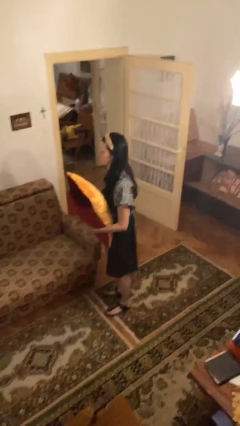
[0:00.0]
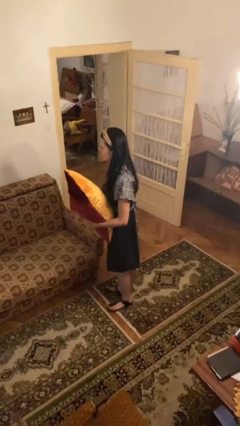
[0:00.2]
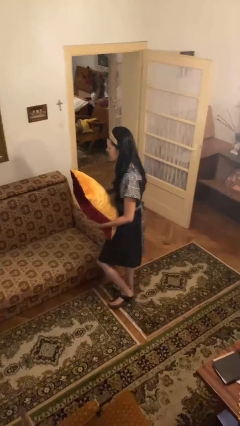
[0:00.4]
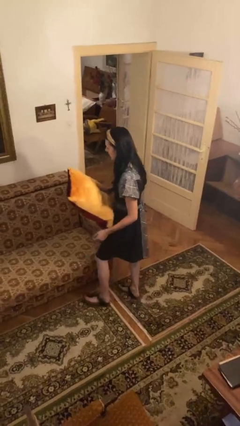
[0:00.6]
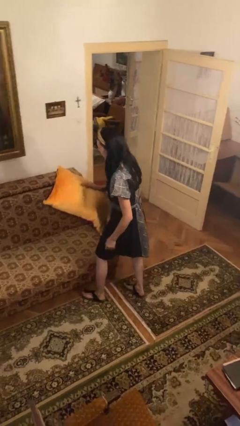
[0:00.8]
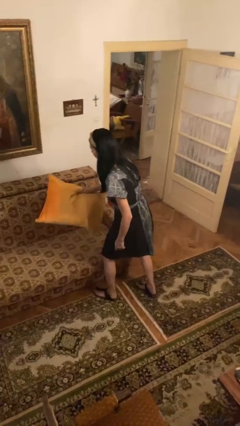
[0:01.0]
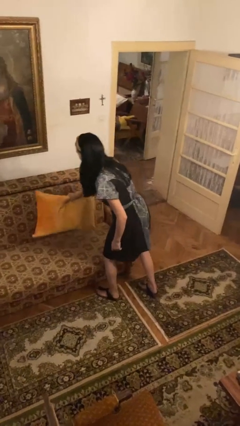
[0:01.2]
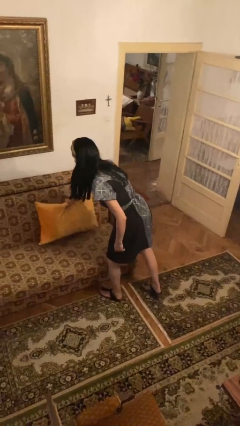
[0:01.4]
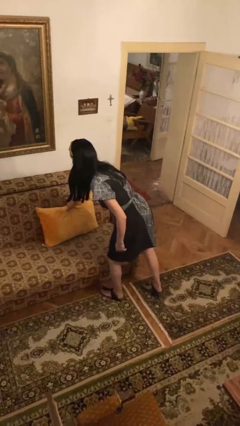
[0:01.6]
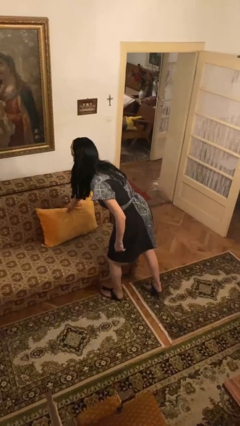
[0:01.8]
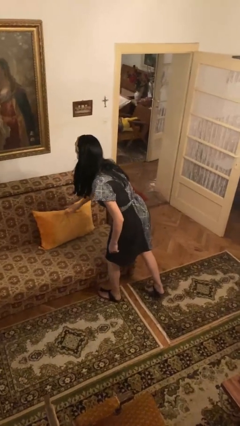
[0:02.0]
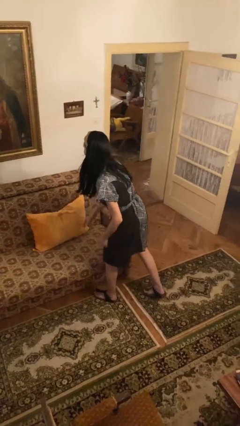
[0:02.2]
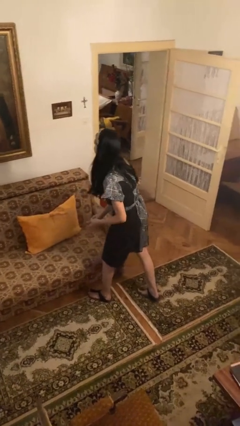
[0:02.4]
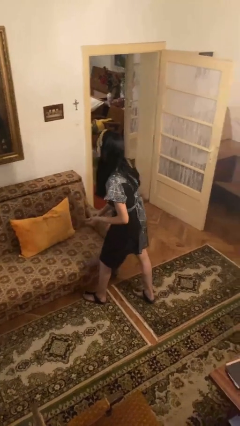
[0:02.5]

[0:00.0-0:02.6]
person puts down object on couch

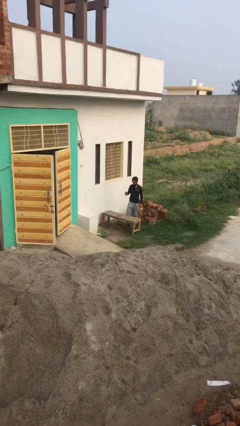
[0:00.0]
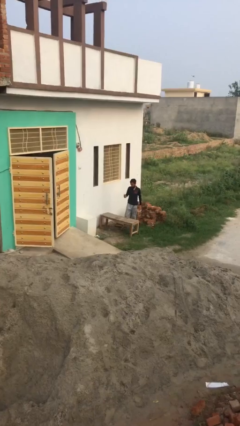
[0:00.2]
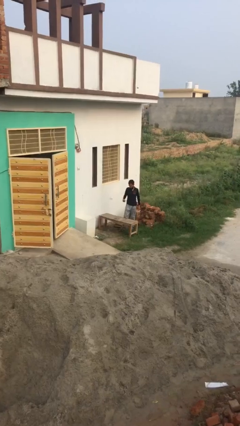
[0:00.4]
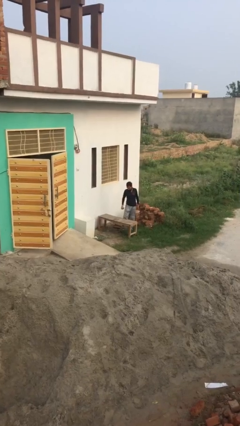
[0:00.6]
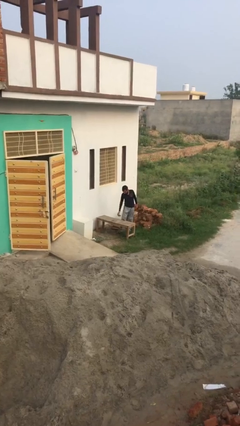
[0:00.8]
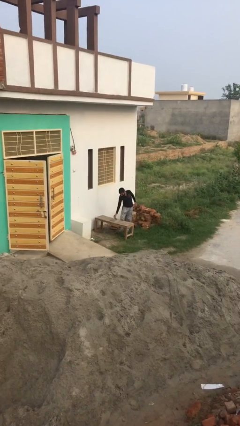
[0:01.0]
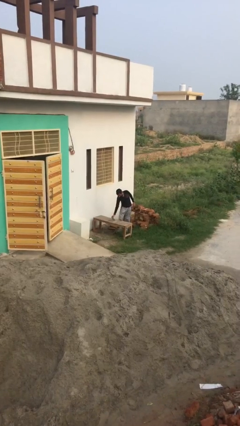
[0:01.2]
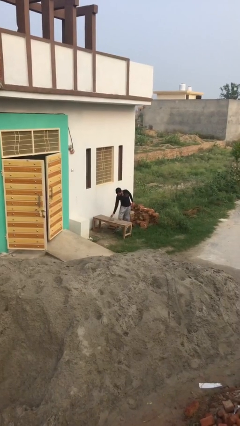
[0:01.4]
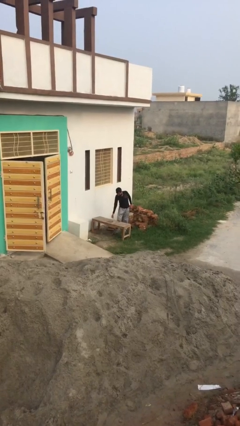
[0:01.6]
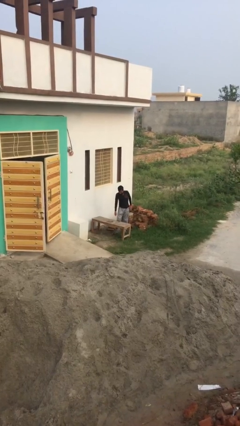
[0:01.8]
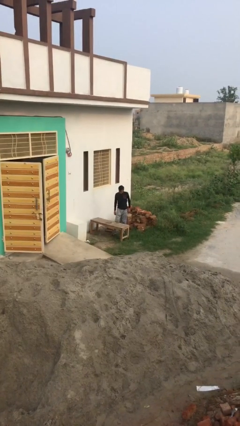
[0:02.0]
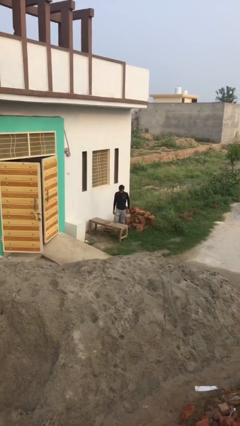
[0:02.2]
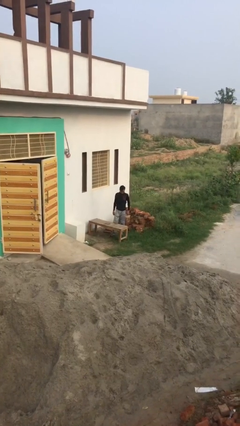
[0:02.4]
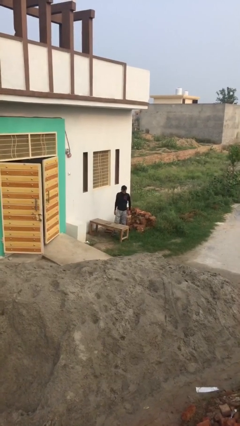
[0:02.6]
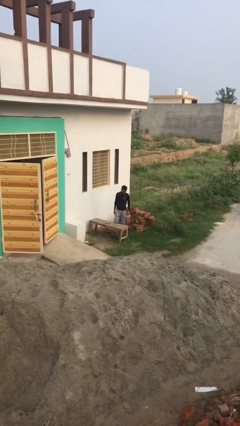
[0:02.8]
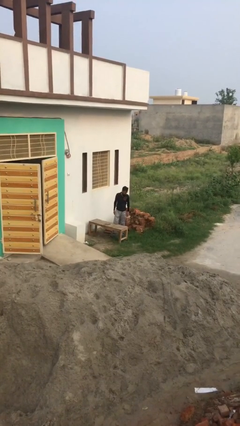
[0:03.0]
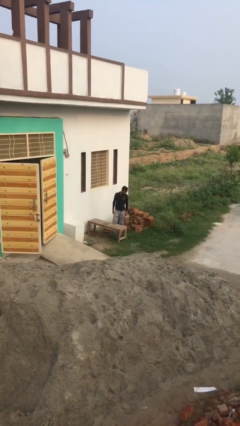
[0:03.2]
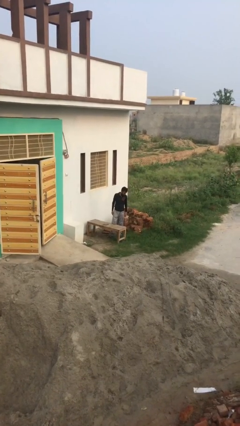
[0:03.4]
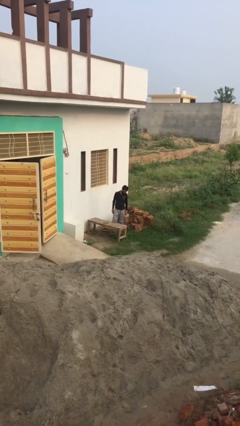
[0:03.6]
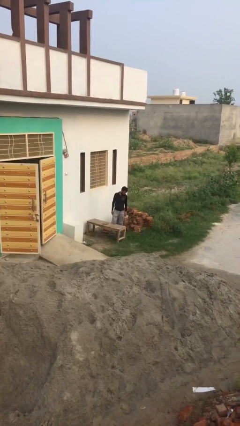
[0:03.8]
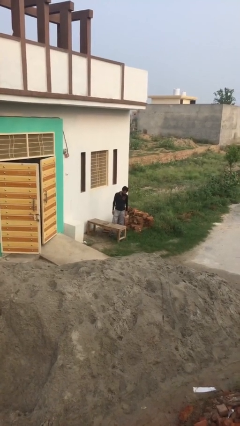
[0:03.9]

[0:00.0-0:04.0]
person puts down object on table

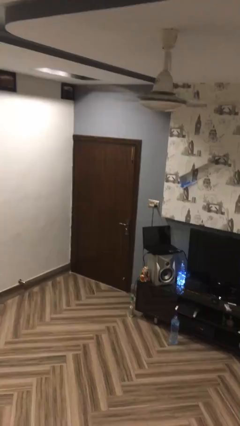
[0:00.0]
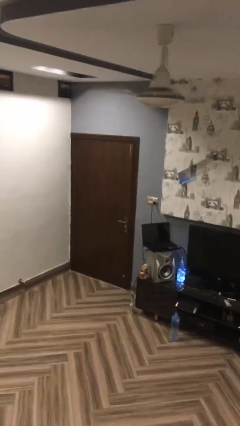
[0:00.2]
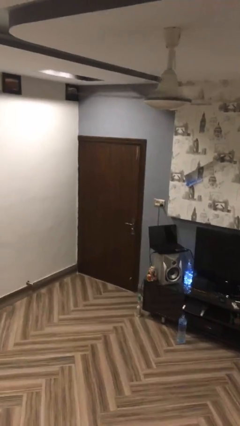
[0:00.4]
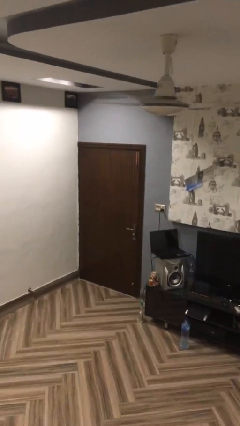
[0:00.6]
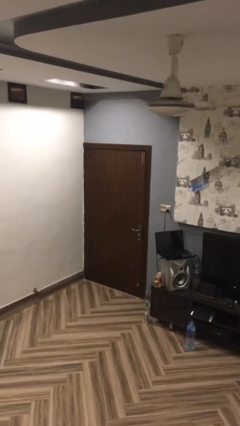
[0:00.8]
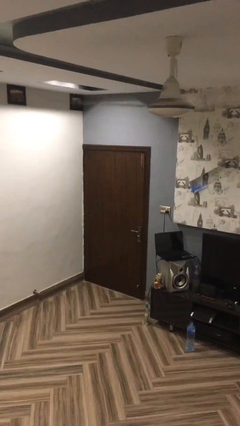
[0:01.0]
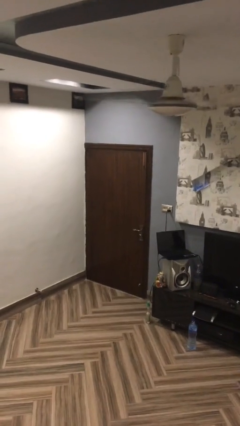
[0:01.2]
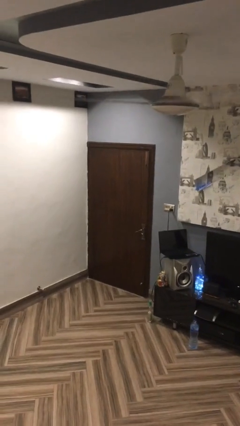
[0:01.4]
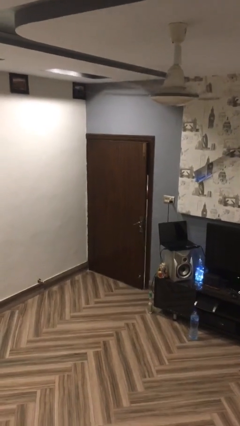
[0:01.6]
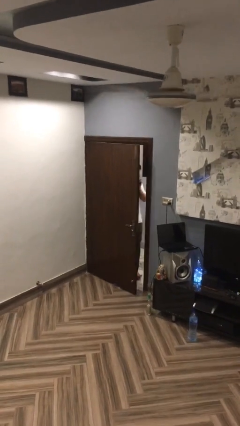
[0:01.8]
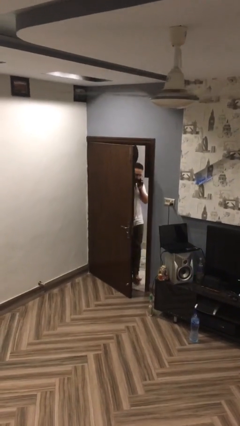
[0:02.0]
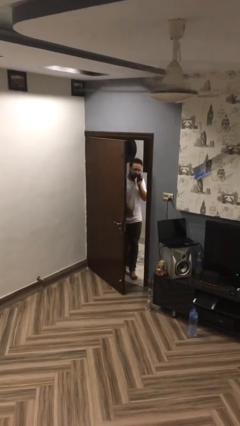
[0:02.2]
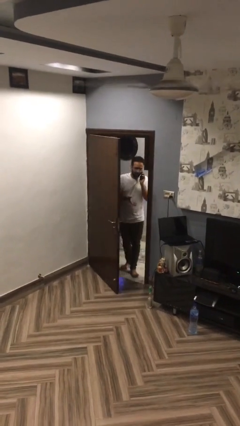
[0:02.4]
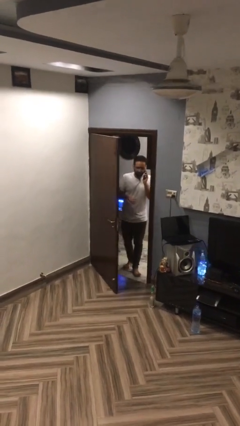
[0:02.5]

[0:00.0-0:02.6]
person opens facility door

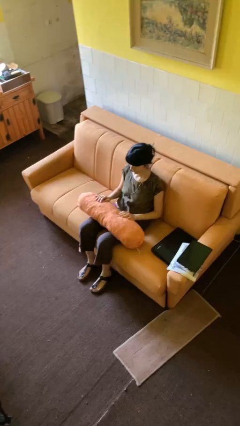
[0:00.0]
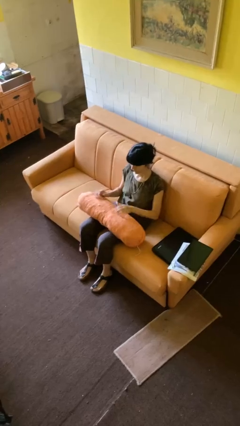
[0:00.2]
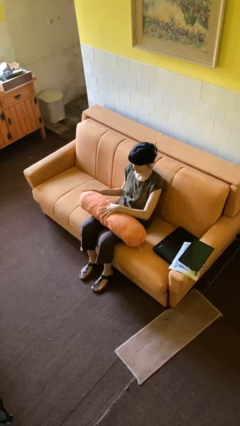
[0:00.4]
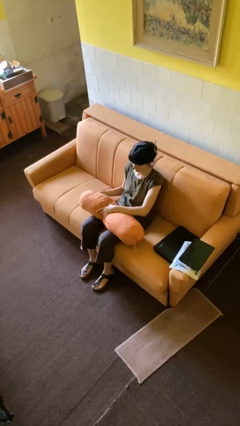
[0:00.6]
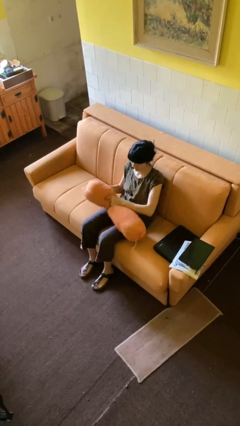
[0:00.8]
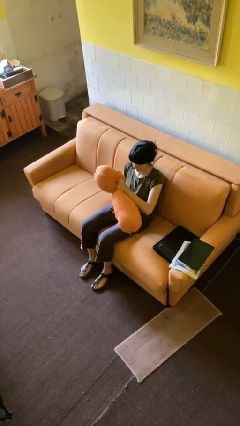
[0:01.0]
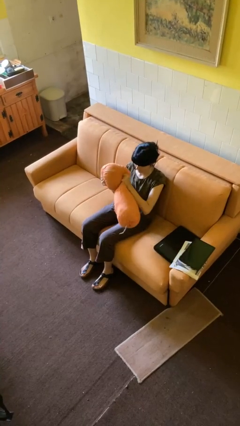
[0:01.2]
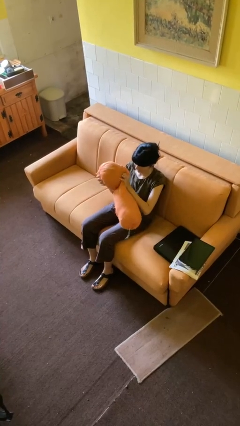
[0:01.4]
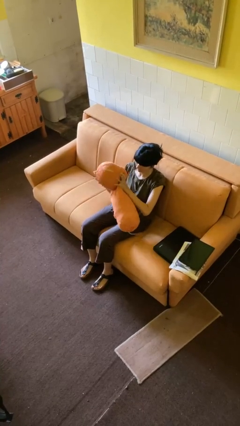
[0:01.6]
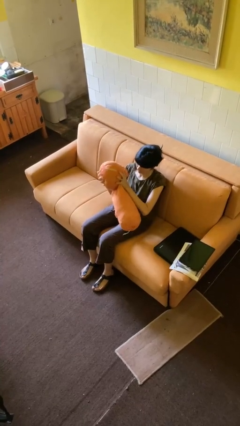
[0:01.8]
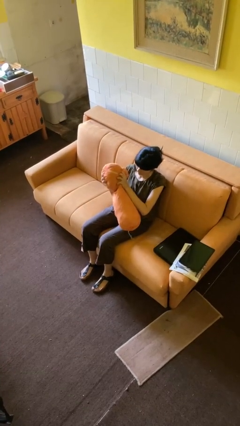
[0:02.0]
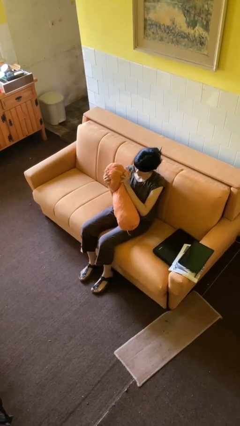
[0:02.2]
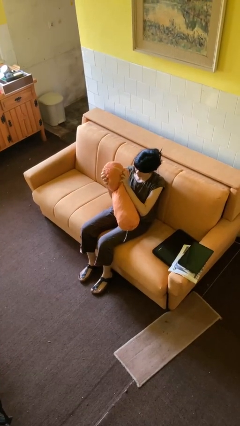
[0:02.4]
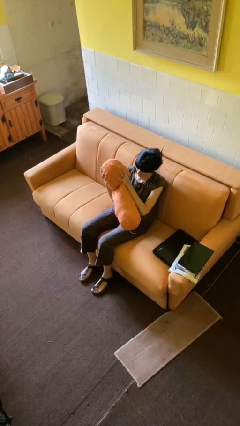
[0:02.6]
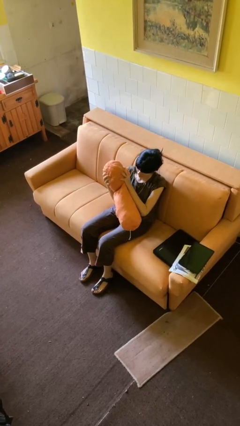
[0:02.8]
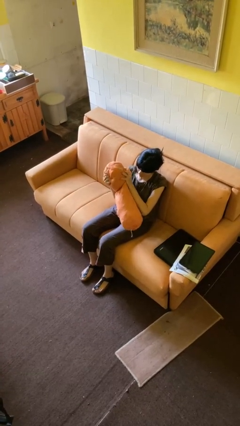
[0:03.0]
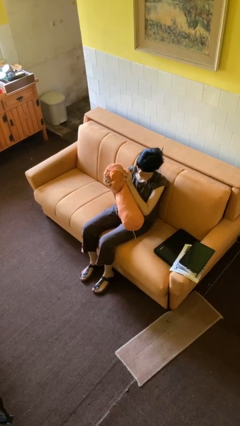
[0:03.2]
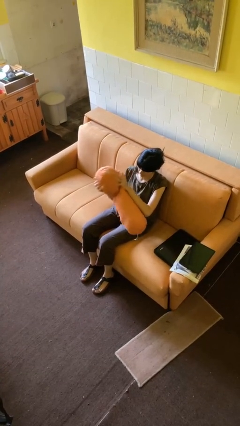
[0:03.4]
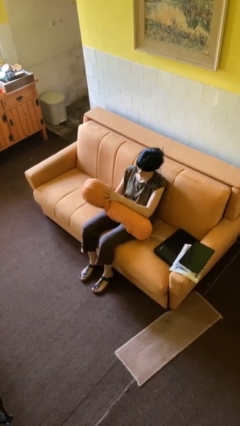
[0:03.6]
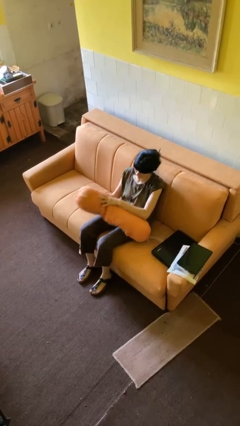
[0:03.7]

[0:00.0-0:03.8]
person squeezes object

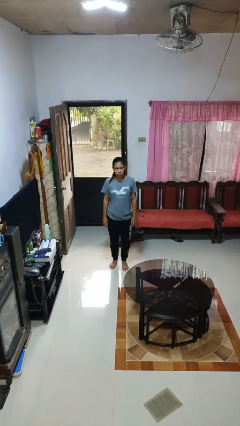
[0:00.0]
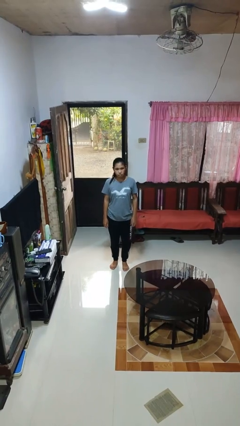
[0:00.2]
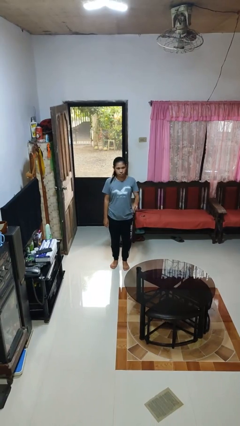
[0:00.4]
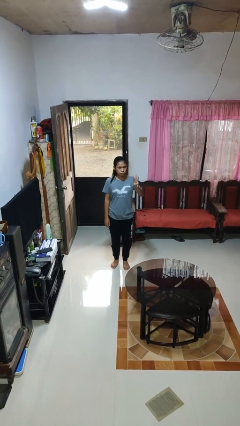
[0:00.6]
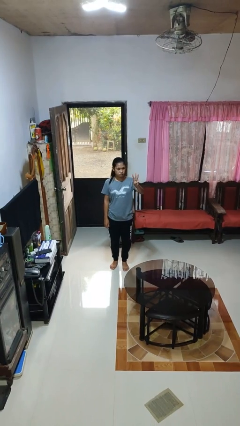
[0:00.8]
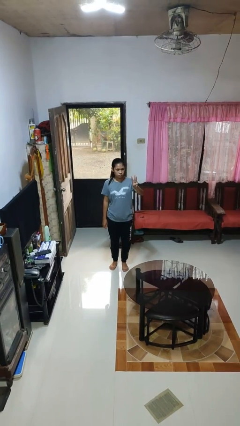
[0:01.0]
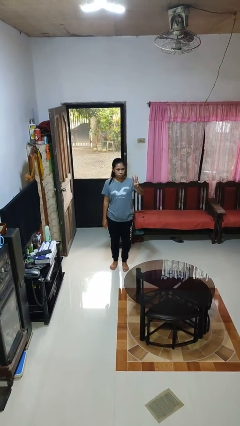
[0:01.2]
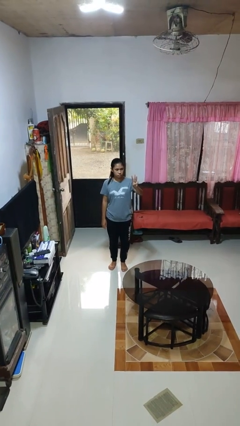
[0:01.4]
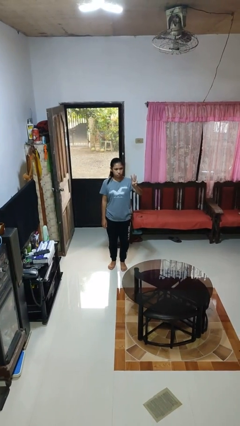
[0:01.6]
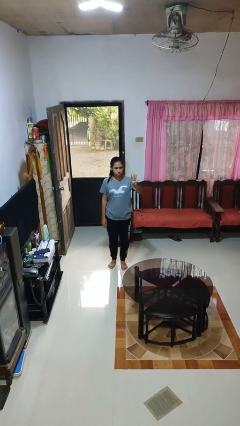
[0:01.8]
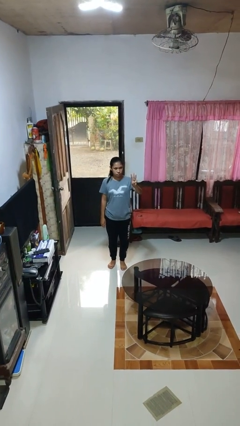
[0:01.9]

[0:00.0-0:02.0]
person gestures number three

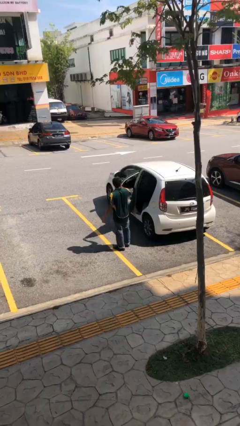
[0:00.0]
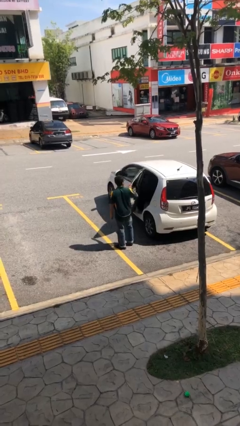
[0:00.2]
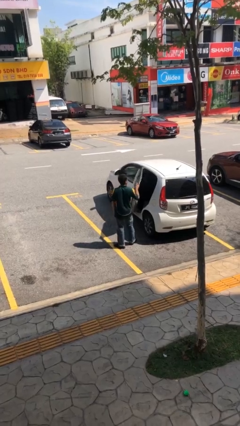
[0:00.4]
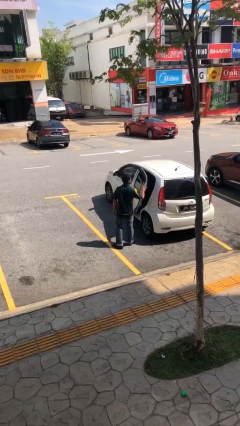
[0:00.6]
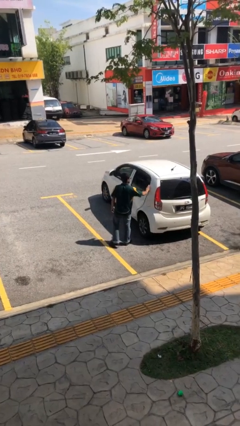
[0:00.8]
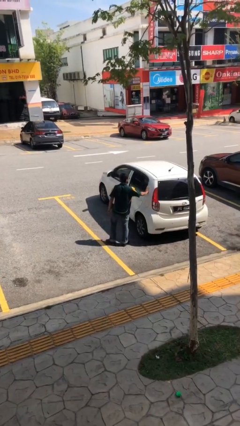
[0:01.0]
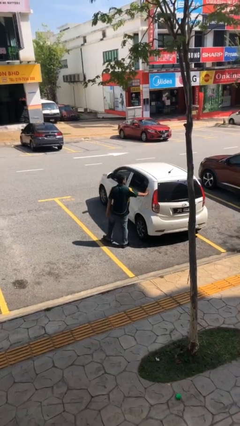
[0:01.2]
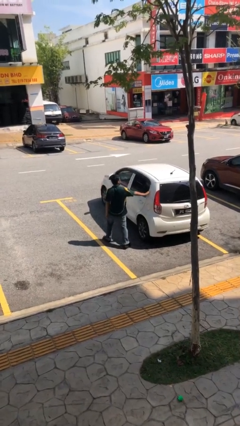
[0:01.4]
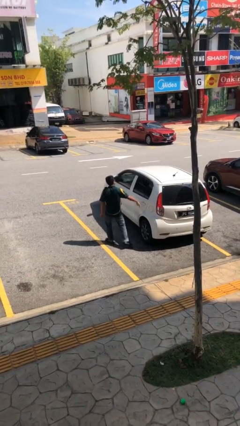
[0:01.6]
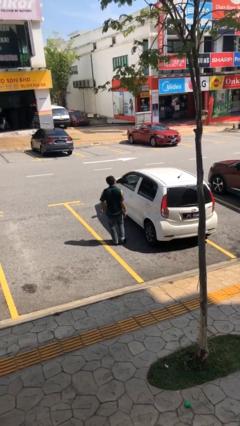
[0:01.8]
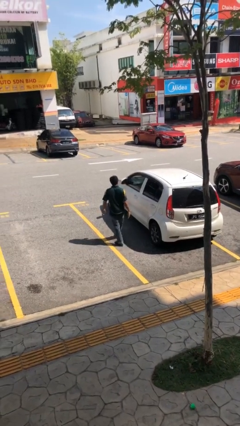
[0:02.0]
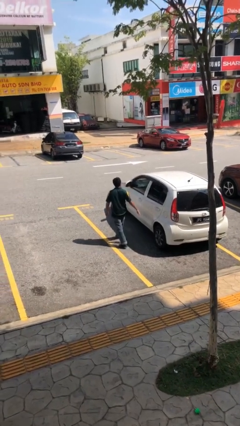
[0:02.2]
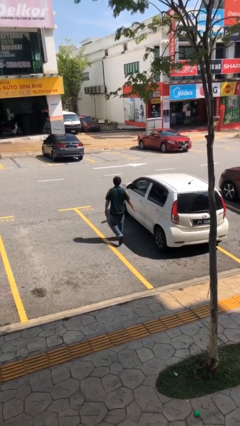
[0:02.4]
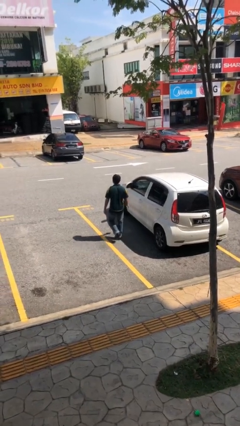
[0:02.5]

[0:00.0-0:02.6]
person closes car door
